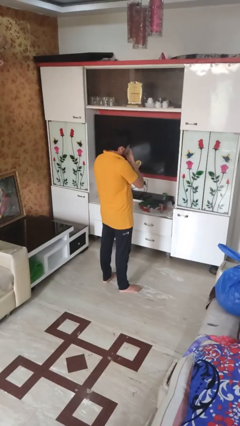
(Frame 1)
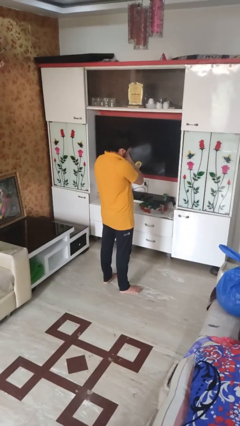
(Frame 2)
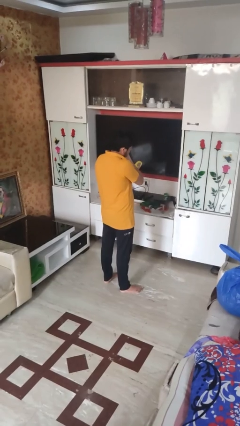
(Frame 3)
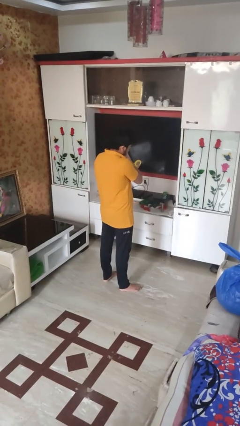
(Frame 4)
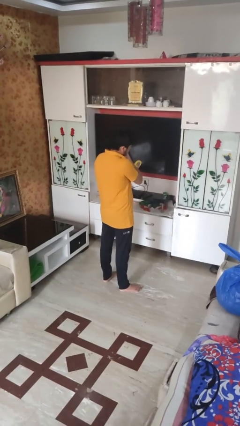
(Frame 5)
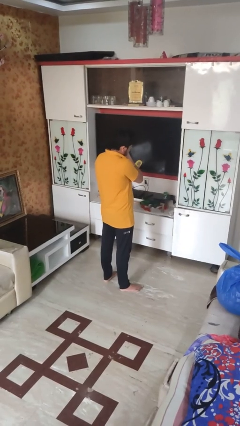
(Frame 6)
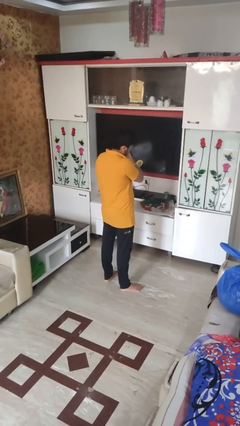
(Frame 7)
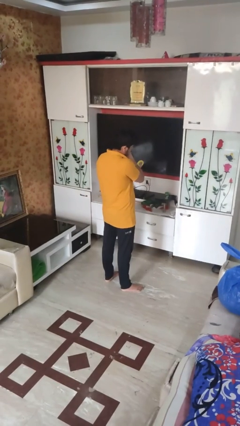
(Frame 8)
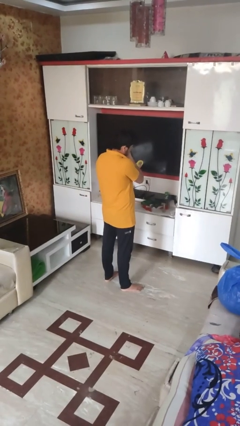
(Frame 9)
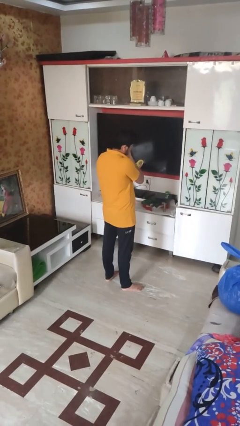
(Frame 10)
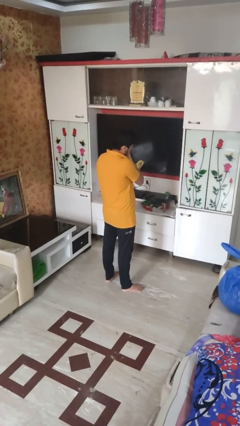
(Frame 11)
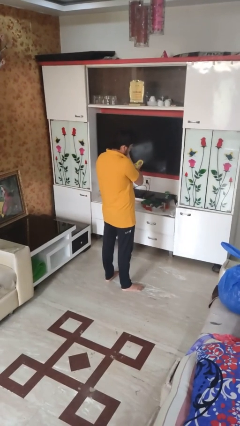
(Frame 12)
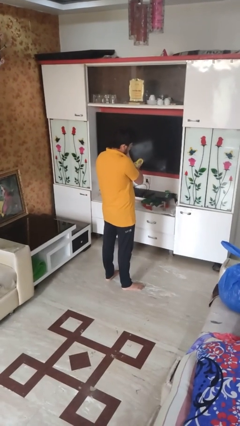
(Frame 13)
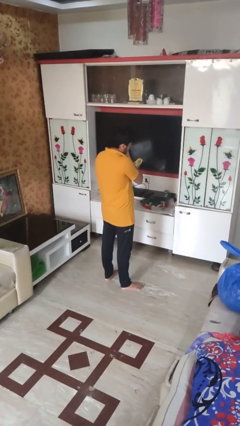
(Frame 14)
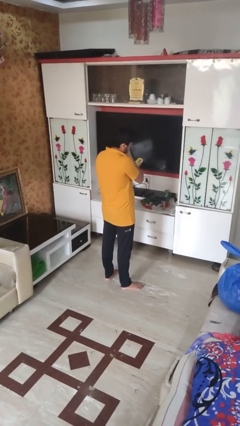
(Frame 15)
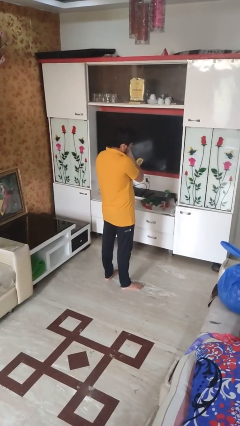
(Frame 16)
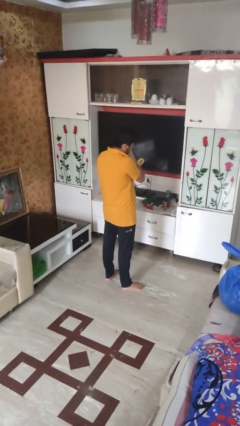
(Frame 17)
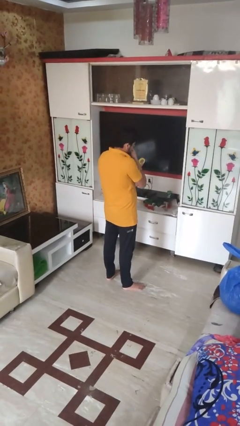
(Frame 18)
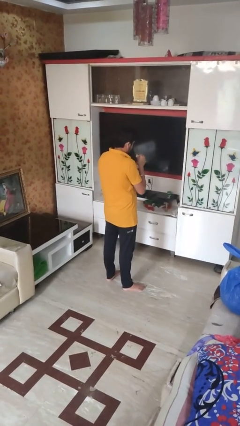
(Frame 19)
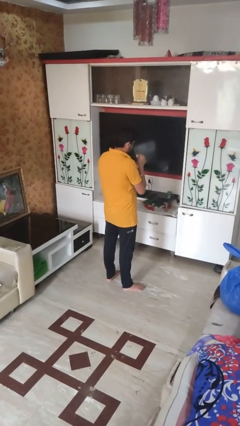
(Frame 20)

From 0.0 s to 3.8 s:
person applies foundation makeup

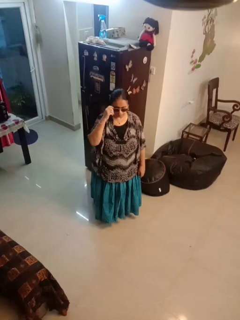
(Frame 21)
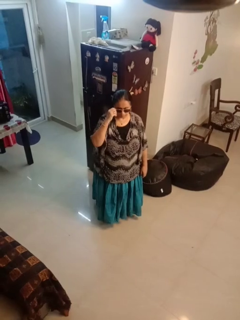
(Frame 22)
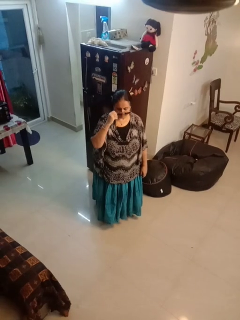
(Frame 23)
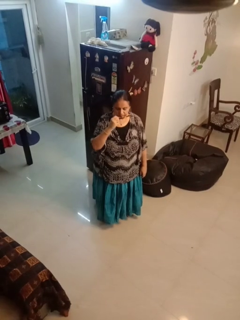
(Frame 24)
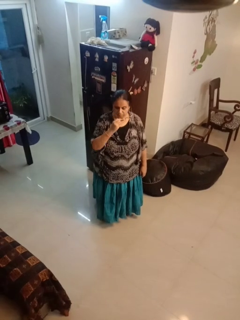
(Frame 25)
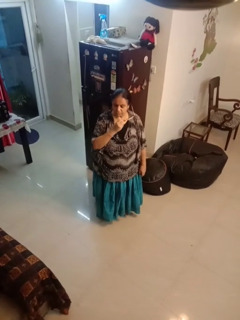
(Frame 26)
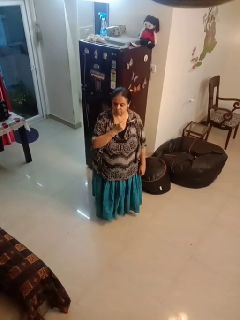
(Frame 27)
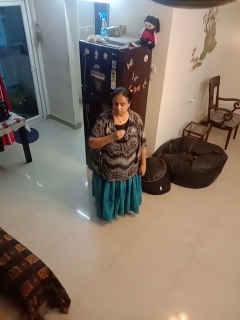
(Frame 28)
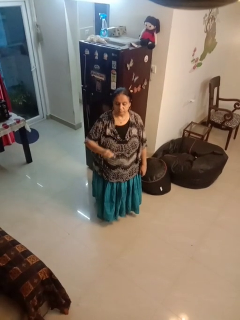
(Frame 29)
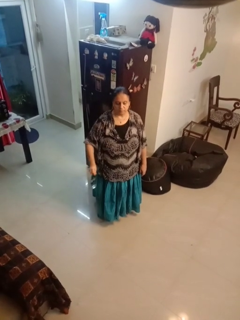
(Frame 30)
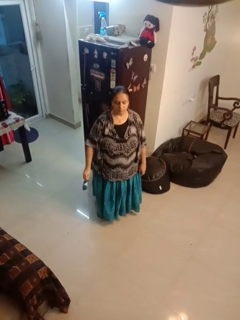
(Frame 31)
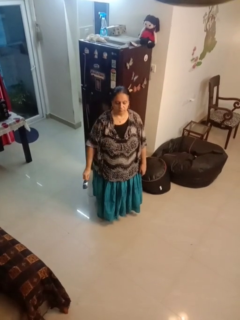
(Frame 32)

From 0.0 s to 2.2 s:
person takes off sunglasses

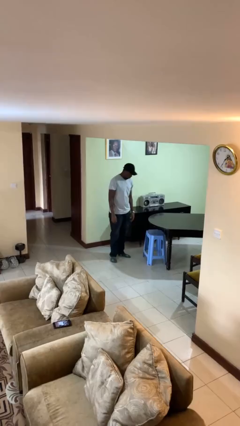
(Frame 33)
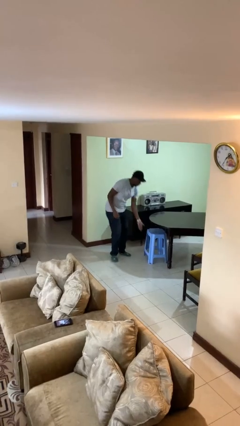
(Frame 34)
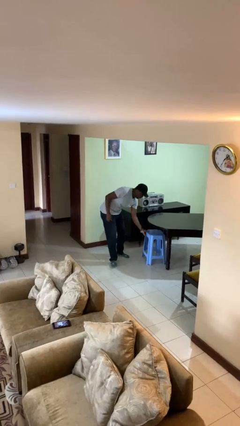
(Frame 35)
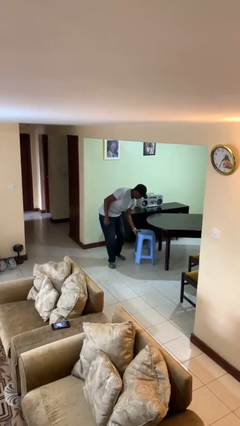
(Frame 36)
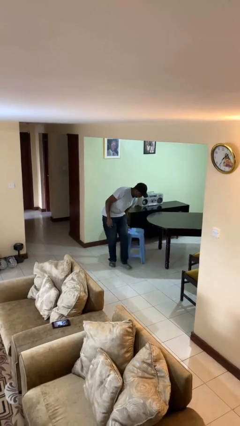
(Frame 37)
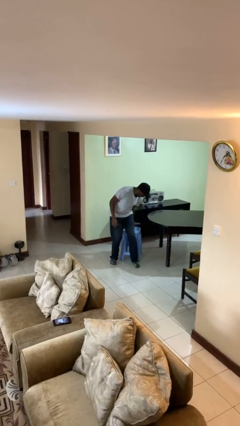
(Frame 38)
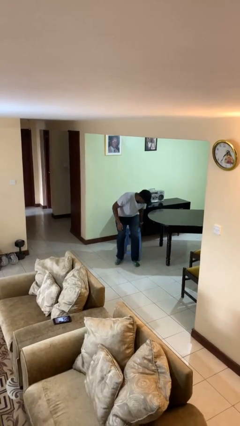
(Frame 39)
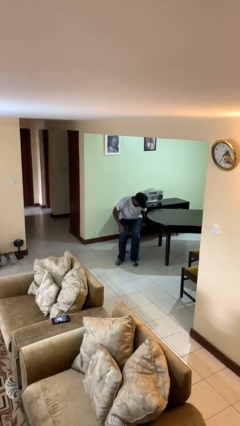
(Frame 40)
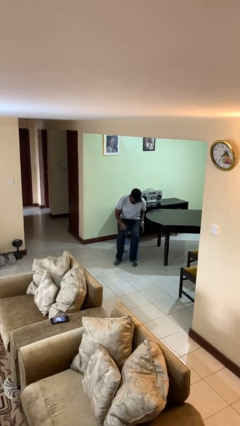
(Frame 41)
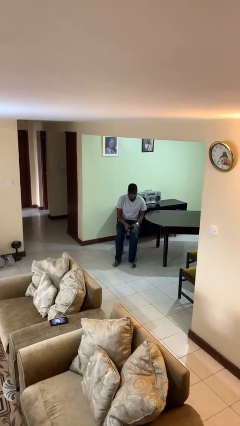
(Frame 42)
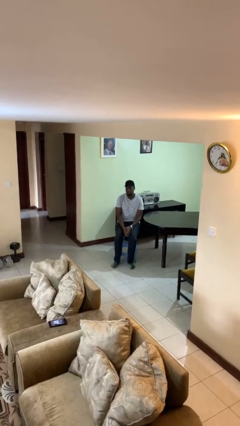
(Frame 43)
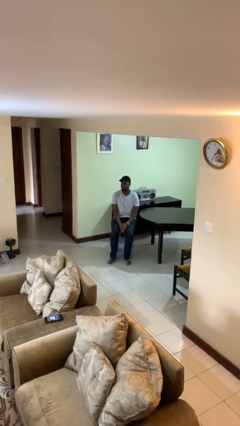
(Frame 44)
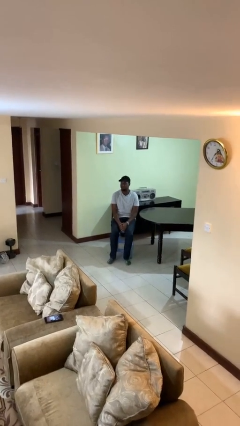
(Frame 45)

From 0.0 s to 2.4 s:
person sits down

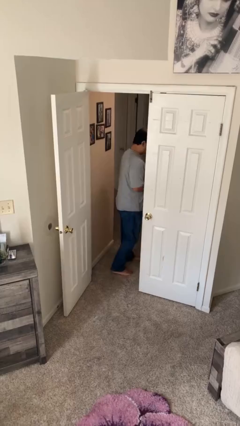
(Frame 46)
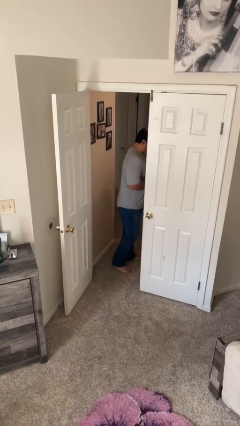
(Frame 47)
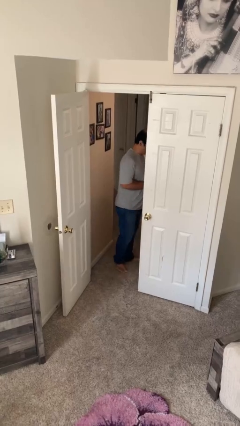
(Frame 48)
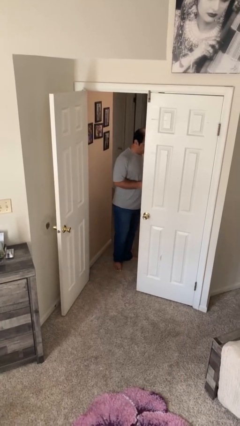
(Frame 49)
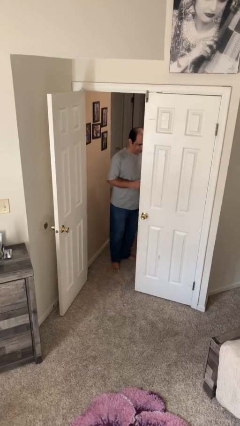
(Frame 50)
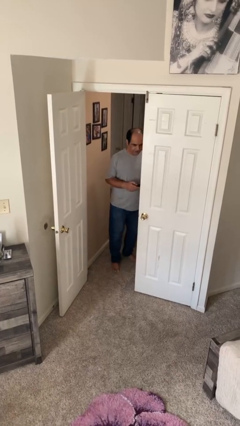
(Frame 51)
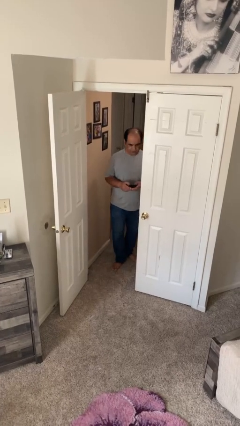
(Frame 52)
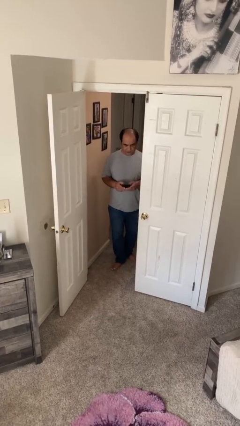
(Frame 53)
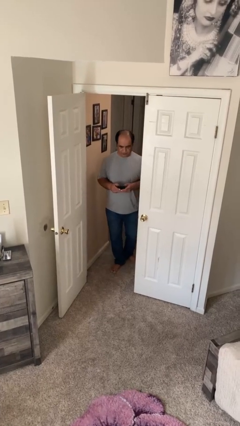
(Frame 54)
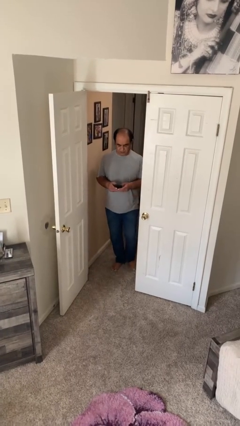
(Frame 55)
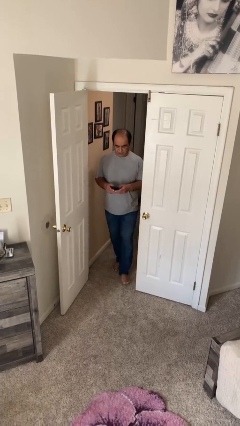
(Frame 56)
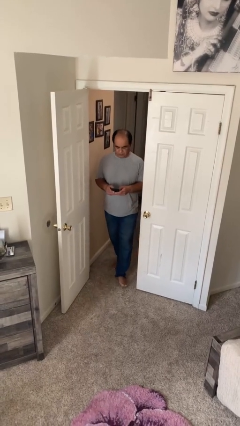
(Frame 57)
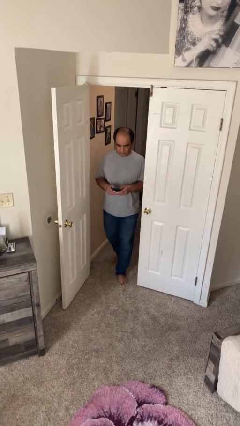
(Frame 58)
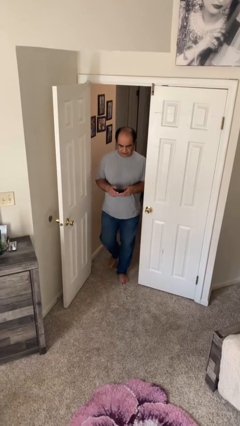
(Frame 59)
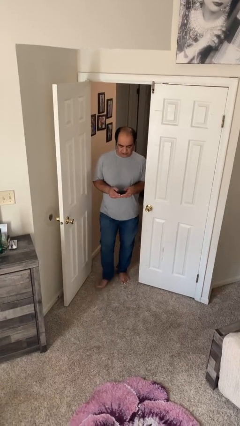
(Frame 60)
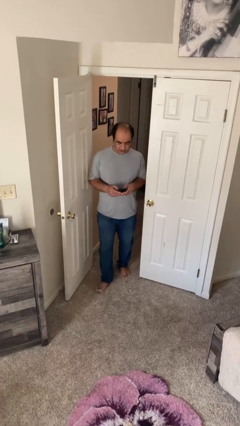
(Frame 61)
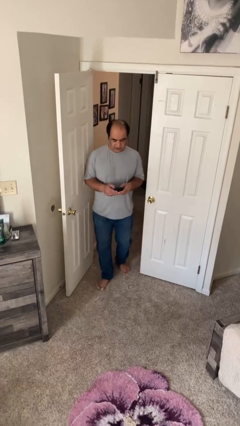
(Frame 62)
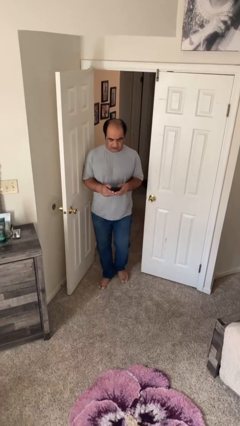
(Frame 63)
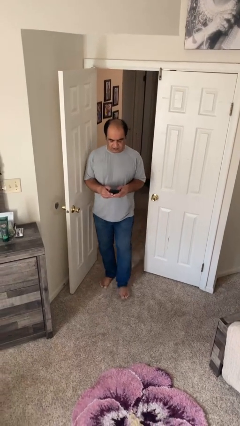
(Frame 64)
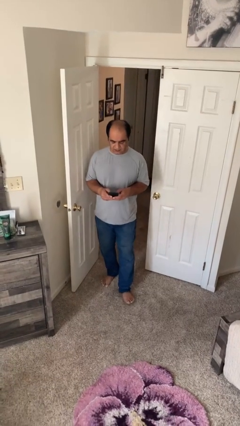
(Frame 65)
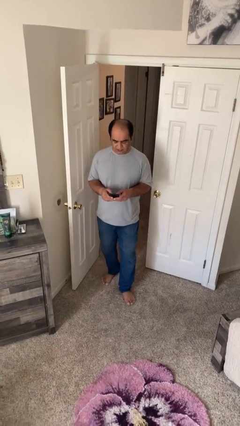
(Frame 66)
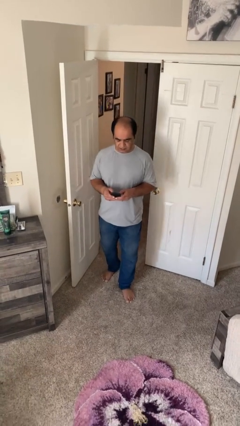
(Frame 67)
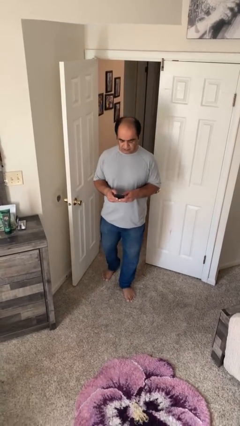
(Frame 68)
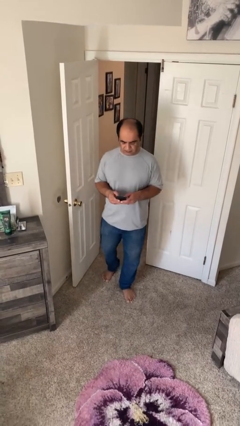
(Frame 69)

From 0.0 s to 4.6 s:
person enters scene through structure

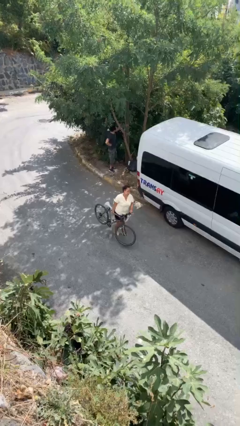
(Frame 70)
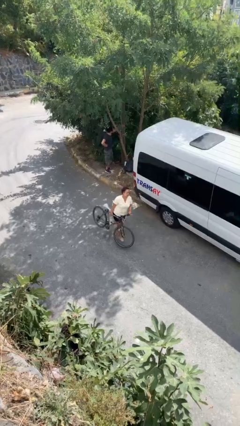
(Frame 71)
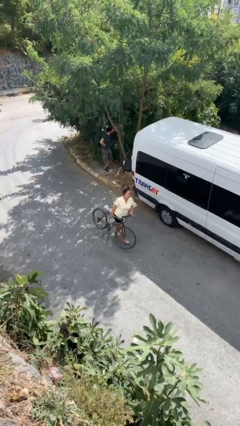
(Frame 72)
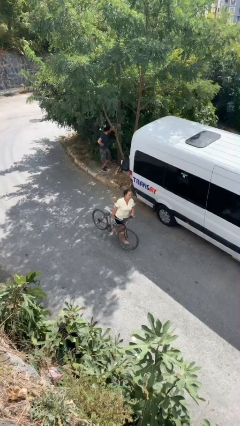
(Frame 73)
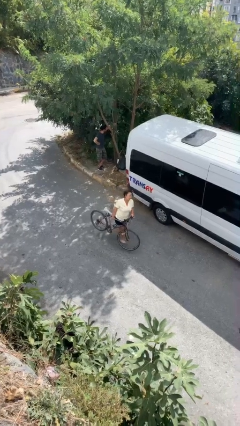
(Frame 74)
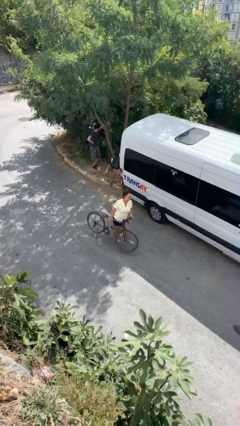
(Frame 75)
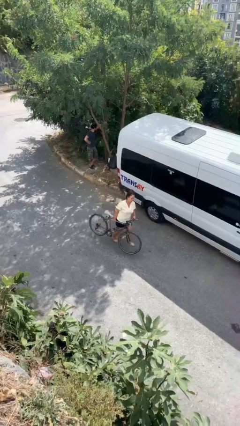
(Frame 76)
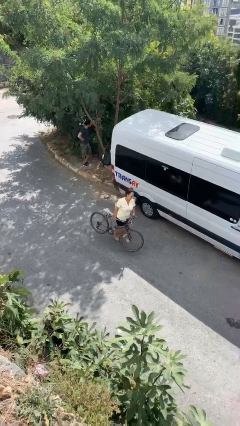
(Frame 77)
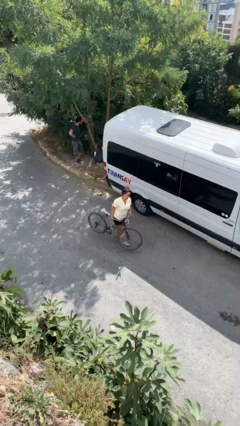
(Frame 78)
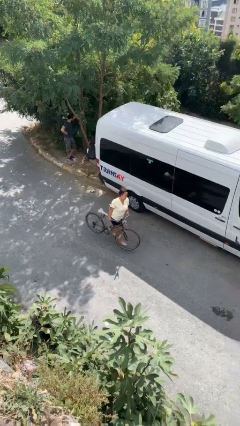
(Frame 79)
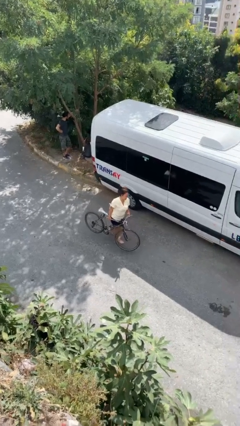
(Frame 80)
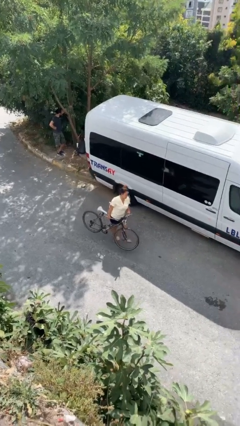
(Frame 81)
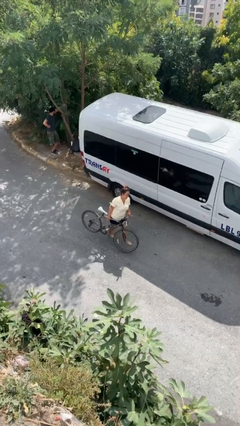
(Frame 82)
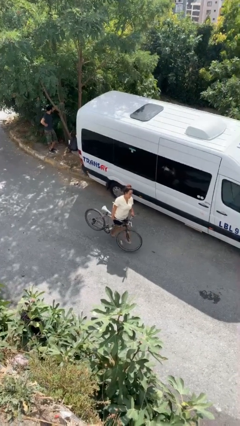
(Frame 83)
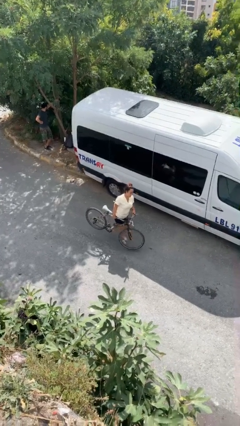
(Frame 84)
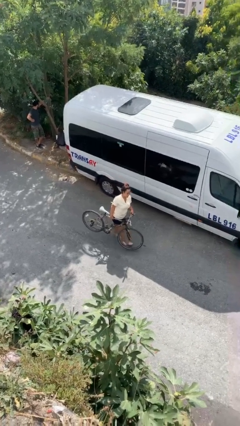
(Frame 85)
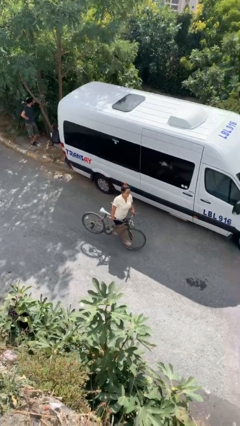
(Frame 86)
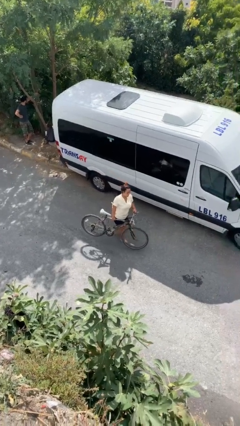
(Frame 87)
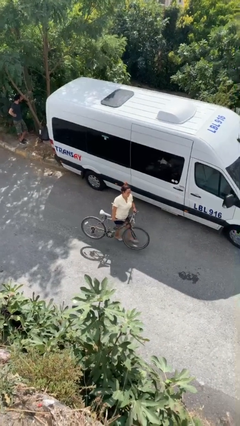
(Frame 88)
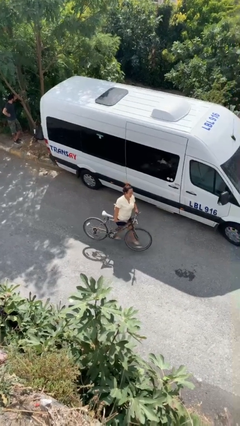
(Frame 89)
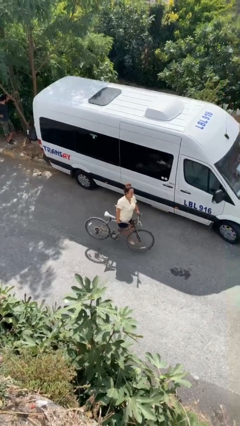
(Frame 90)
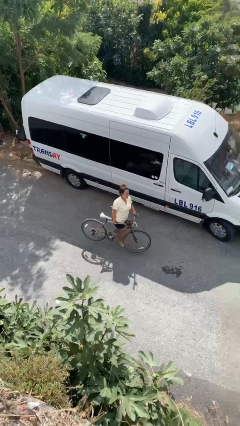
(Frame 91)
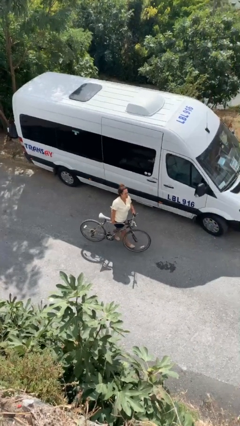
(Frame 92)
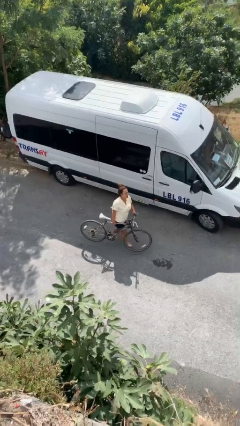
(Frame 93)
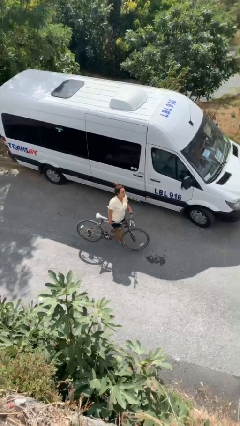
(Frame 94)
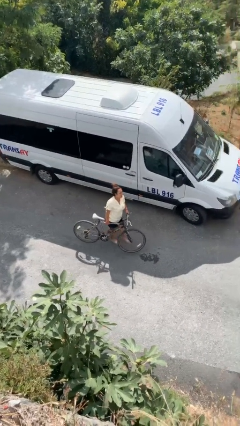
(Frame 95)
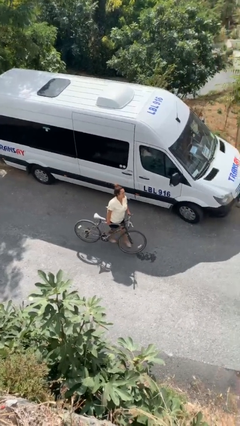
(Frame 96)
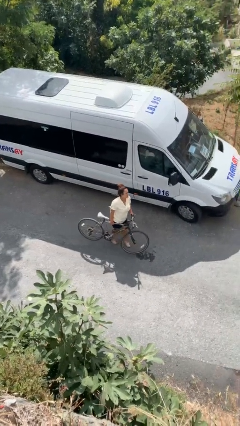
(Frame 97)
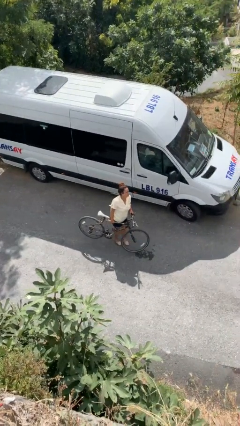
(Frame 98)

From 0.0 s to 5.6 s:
person carries heavy object
